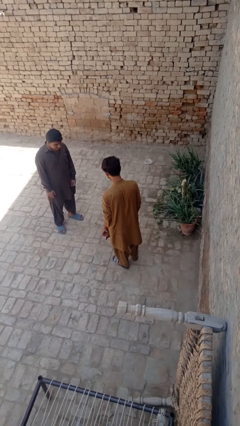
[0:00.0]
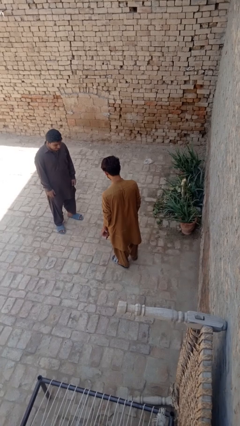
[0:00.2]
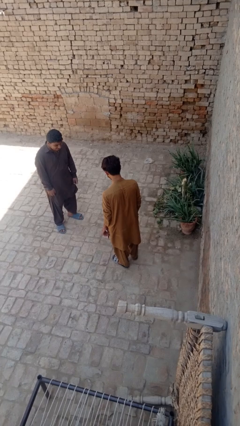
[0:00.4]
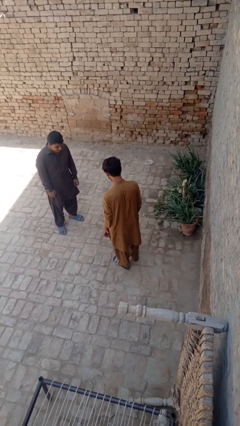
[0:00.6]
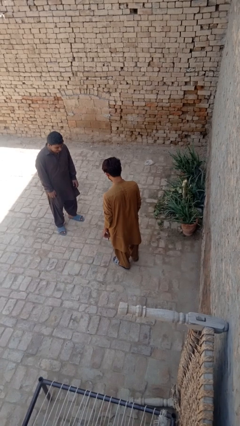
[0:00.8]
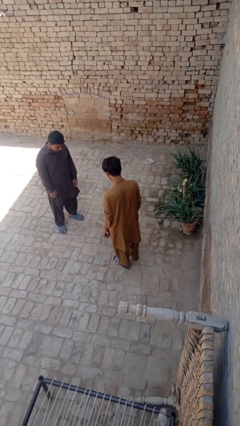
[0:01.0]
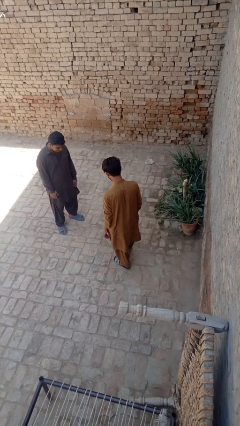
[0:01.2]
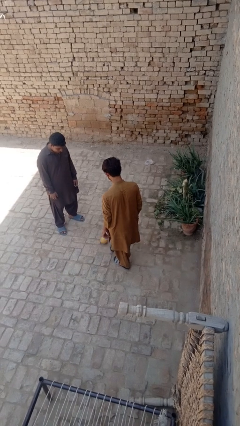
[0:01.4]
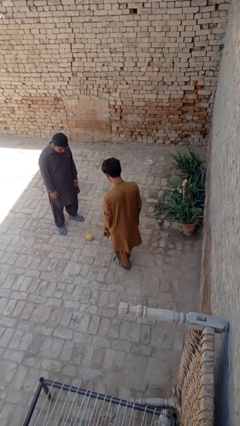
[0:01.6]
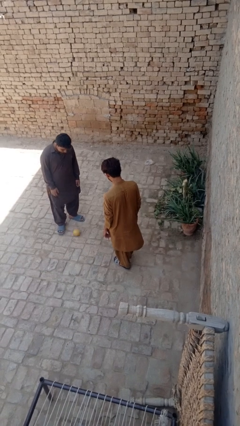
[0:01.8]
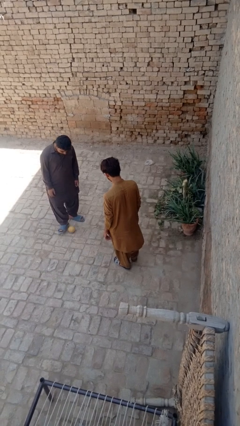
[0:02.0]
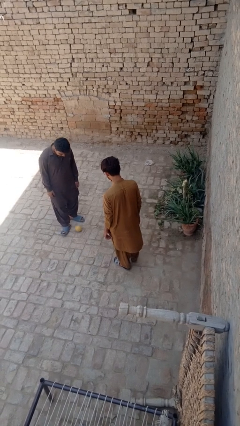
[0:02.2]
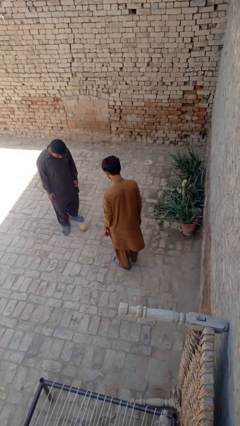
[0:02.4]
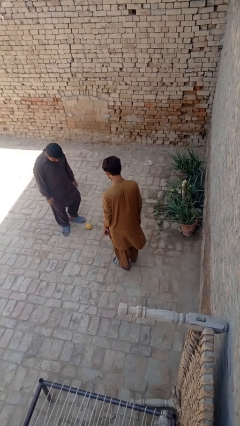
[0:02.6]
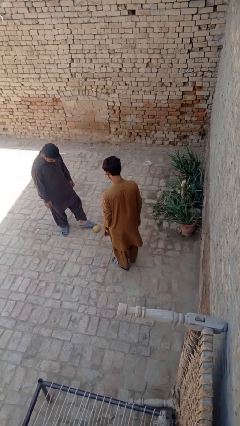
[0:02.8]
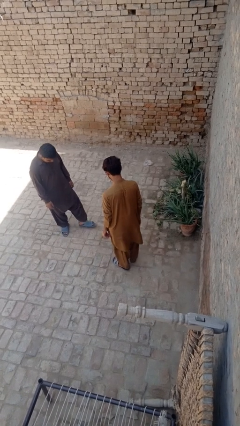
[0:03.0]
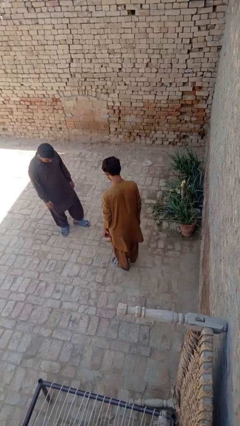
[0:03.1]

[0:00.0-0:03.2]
person kicks object to person

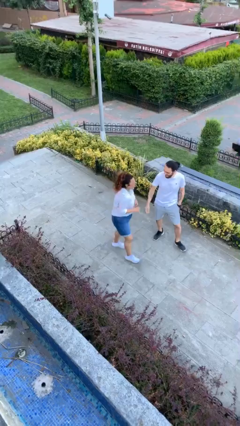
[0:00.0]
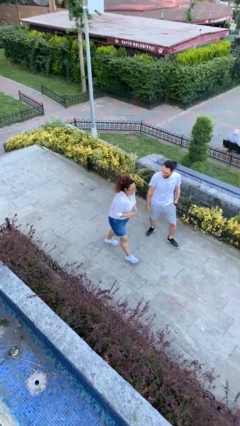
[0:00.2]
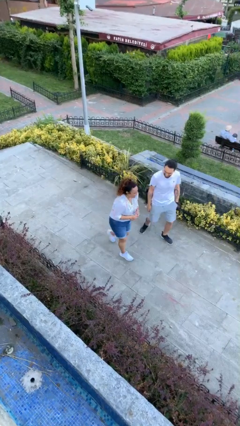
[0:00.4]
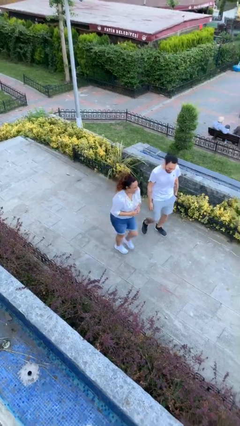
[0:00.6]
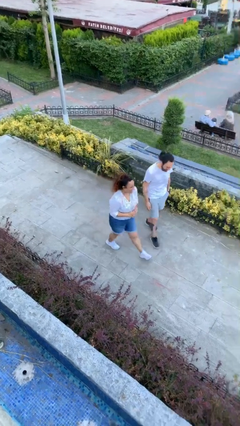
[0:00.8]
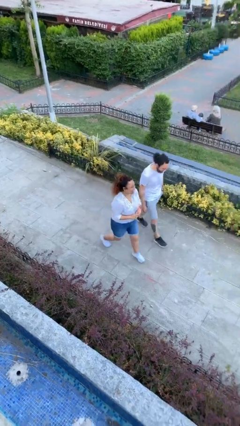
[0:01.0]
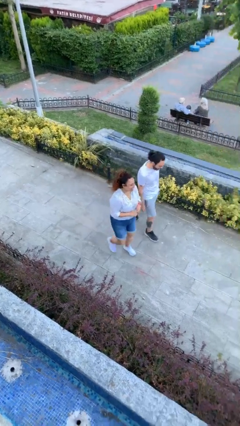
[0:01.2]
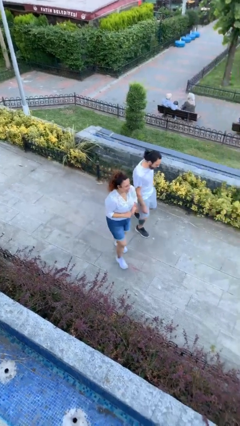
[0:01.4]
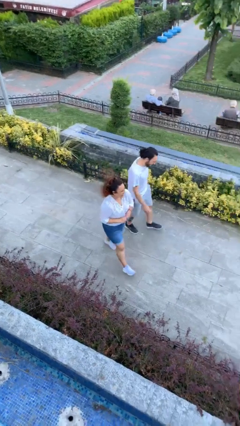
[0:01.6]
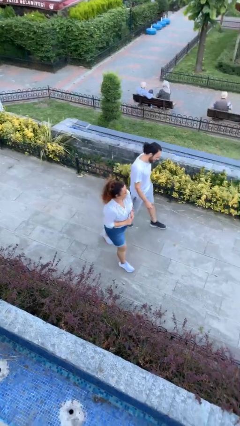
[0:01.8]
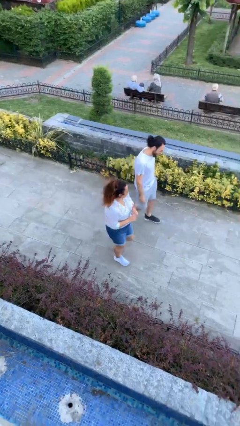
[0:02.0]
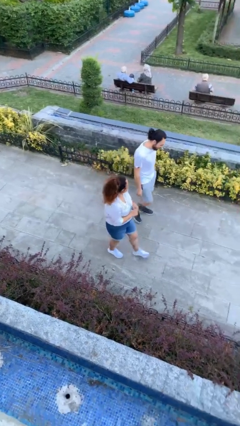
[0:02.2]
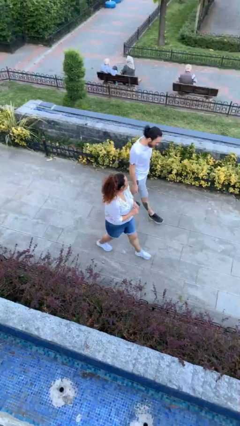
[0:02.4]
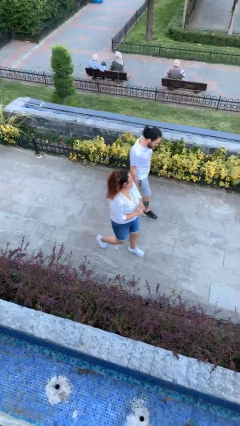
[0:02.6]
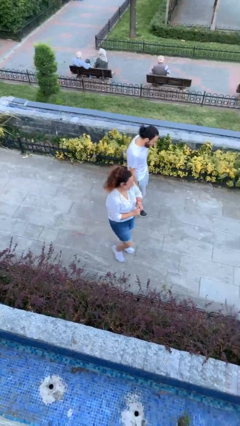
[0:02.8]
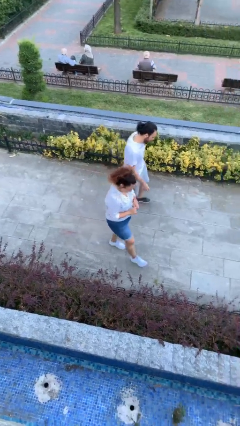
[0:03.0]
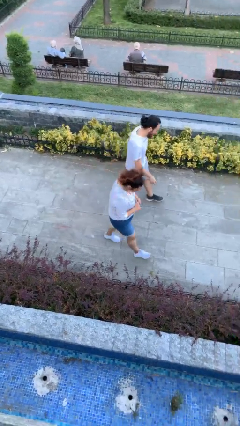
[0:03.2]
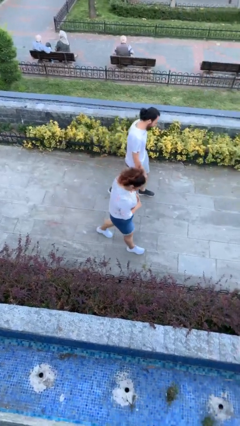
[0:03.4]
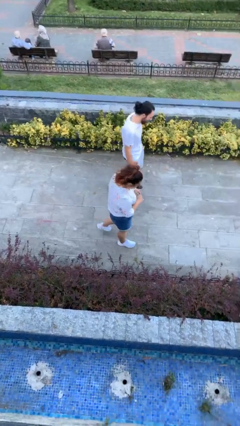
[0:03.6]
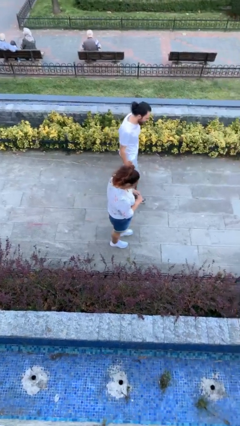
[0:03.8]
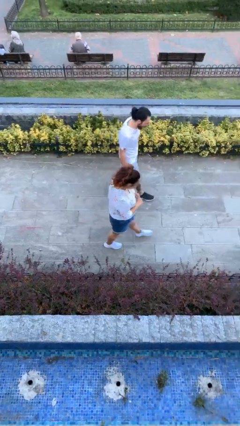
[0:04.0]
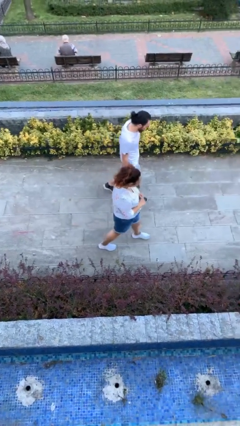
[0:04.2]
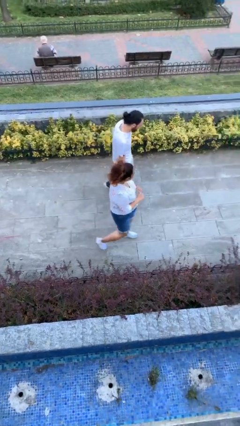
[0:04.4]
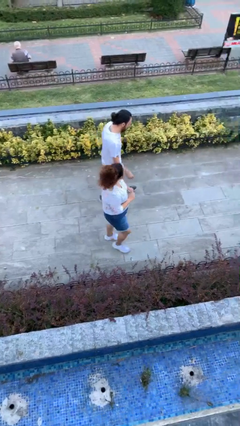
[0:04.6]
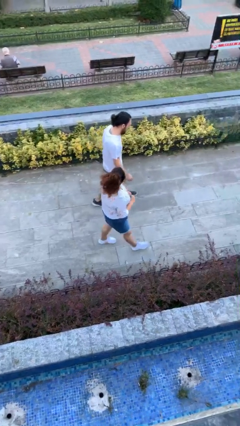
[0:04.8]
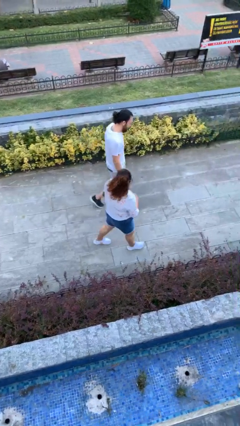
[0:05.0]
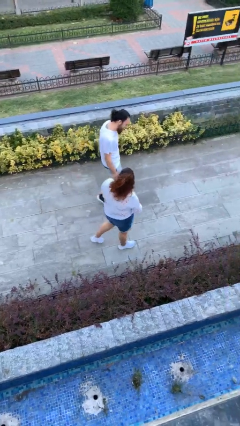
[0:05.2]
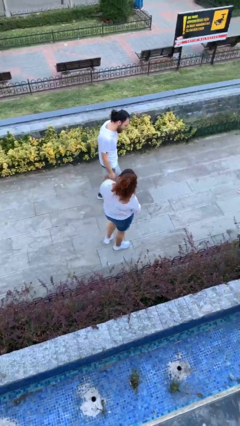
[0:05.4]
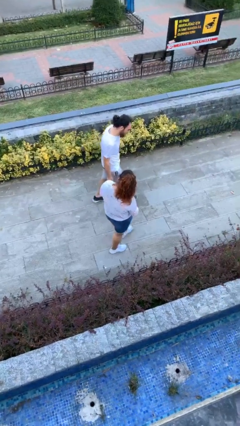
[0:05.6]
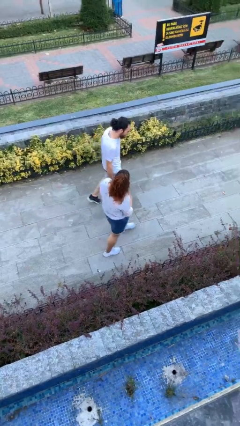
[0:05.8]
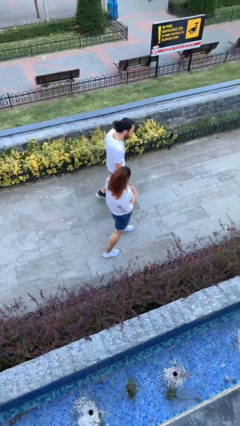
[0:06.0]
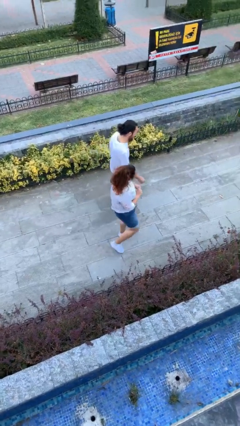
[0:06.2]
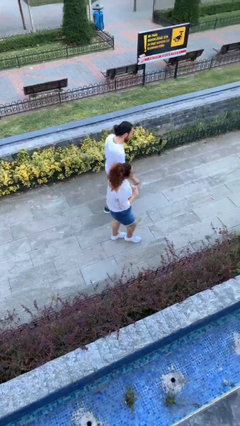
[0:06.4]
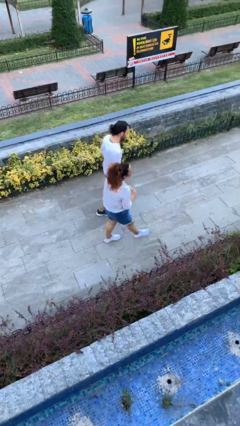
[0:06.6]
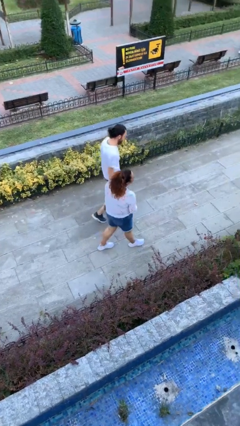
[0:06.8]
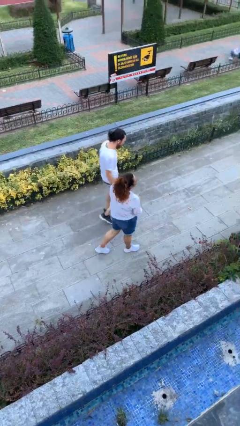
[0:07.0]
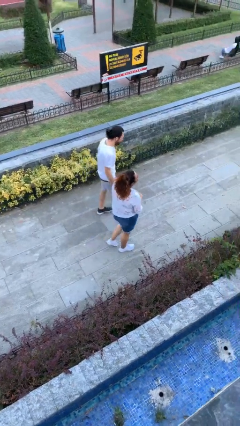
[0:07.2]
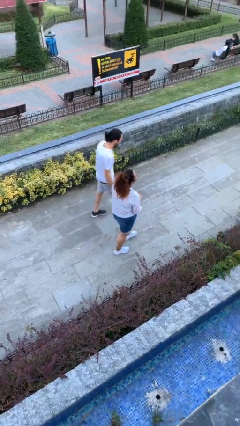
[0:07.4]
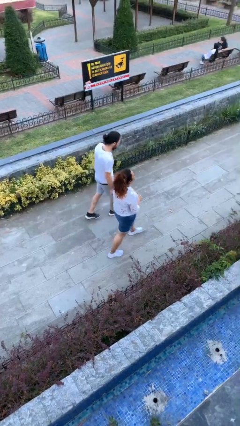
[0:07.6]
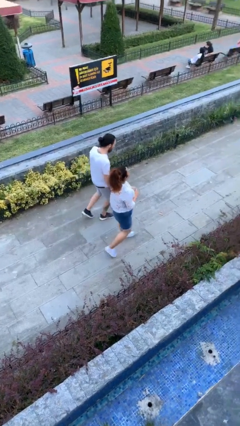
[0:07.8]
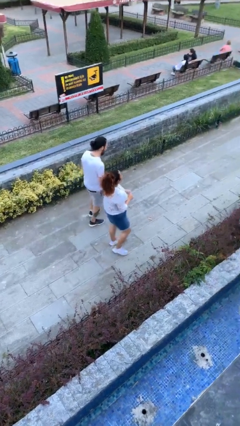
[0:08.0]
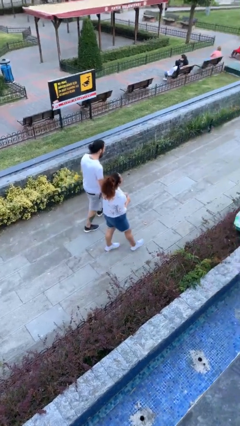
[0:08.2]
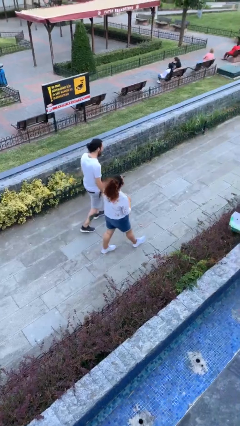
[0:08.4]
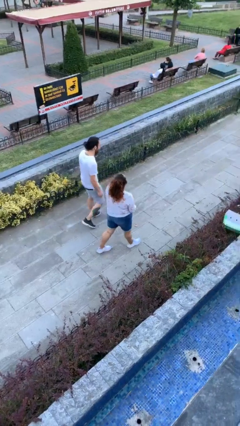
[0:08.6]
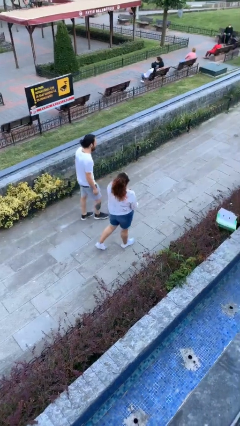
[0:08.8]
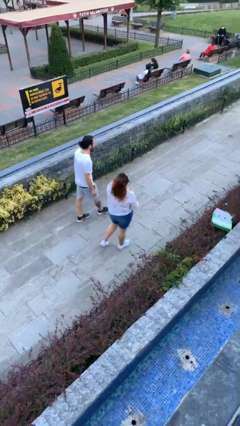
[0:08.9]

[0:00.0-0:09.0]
person talks to person

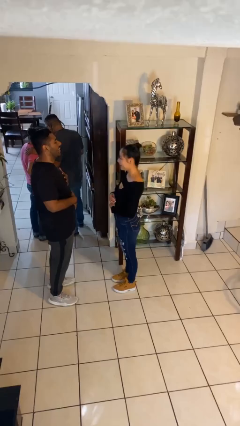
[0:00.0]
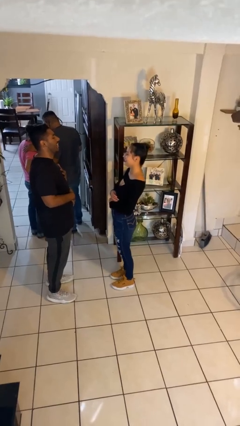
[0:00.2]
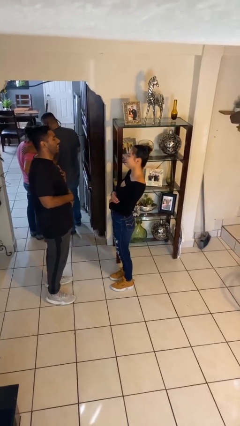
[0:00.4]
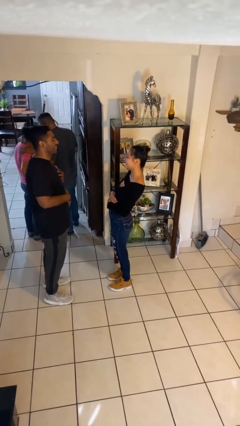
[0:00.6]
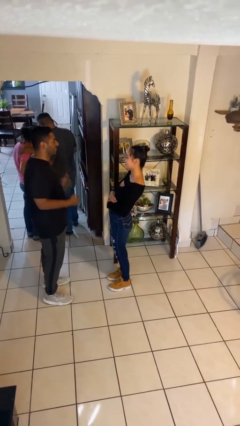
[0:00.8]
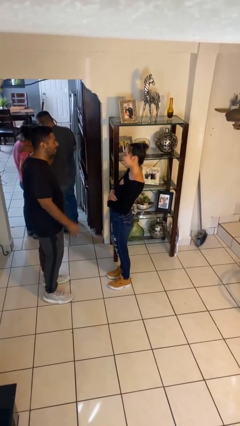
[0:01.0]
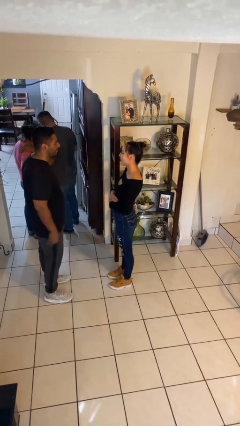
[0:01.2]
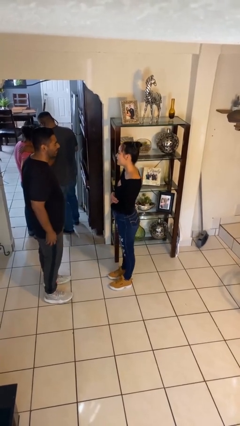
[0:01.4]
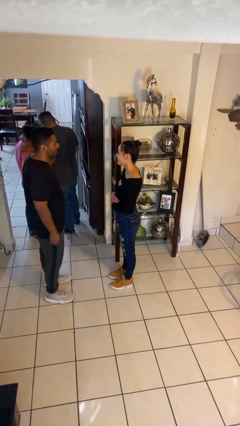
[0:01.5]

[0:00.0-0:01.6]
person laughs with person

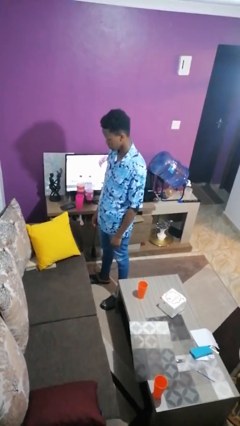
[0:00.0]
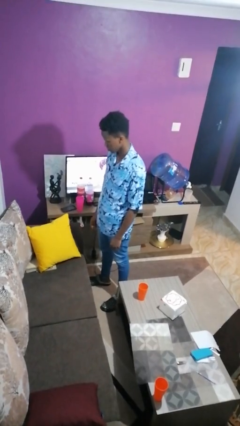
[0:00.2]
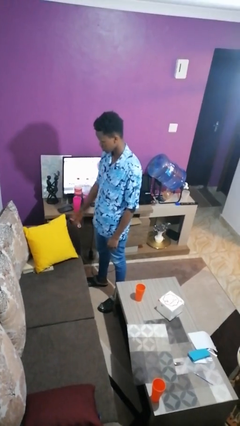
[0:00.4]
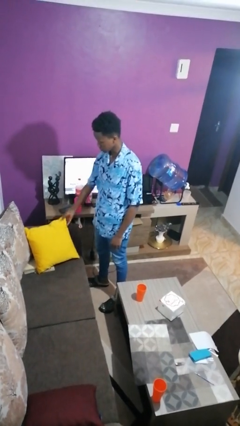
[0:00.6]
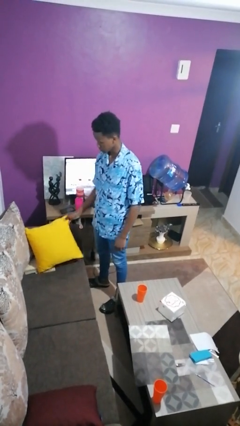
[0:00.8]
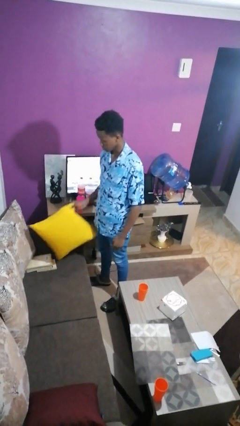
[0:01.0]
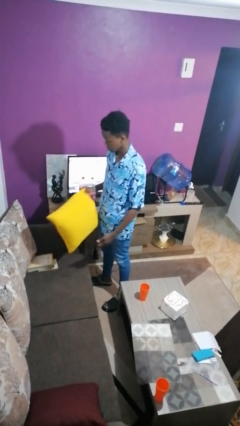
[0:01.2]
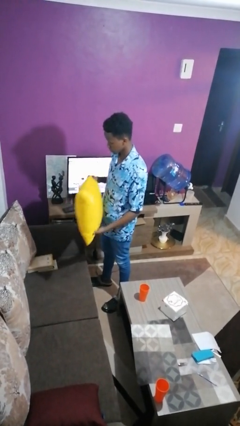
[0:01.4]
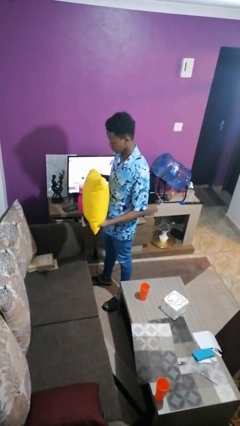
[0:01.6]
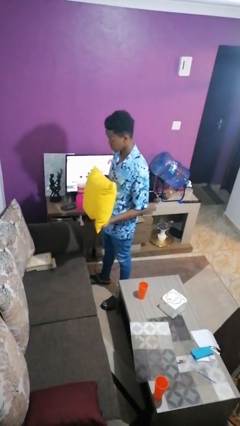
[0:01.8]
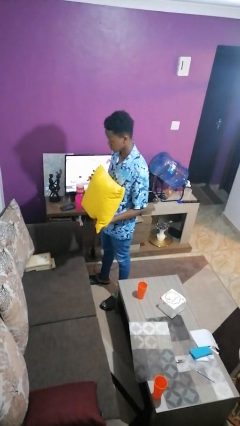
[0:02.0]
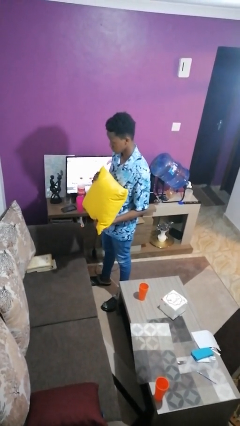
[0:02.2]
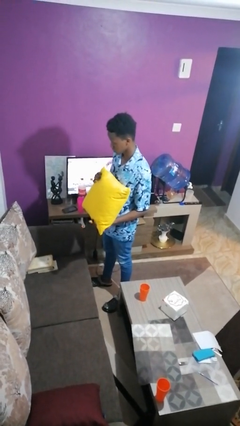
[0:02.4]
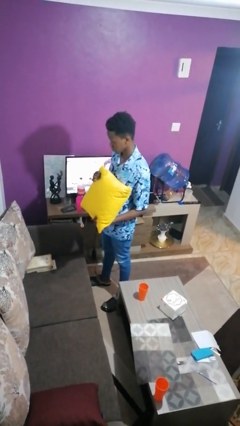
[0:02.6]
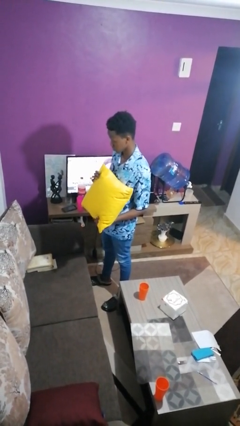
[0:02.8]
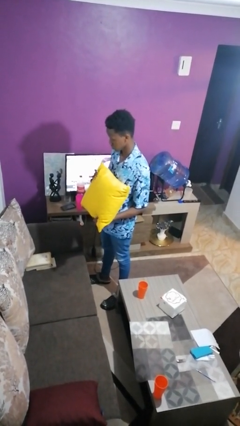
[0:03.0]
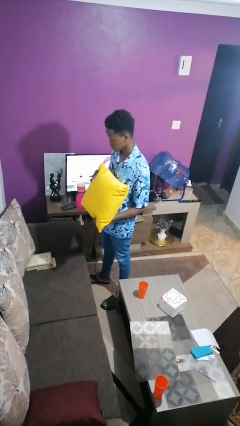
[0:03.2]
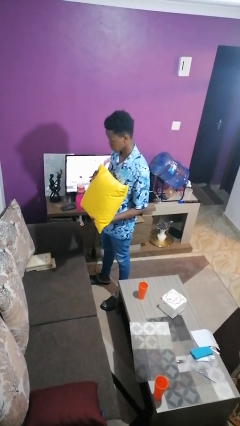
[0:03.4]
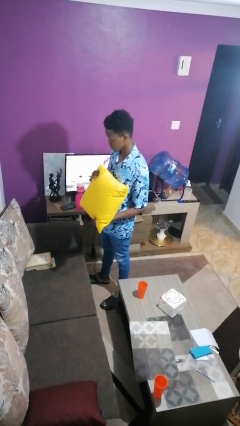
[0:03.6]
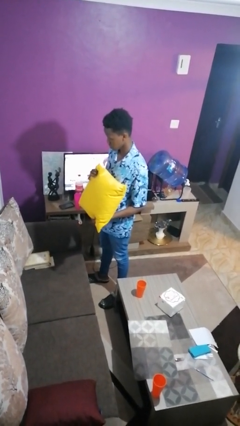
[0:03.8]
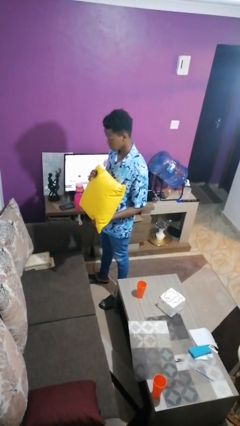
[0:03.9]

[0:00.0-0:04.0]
person picks up object from couch
